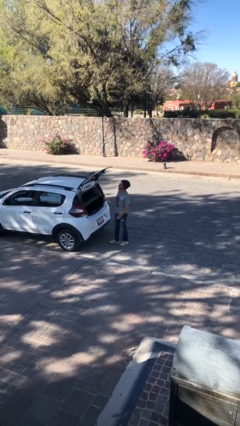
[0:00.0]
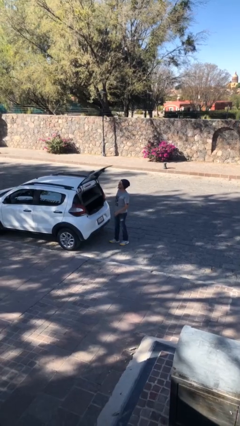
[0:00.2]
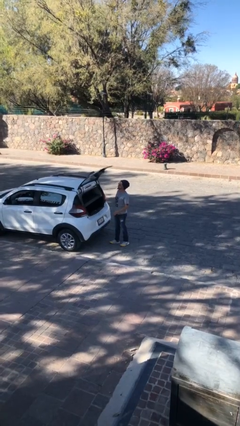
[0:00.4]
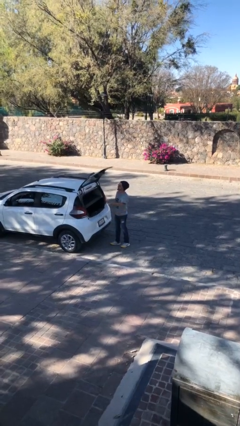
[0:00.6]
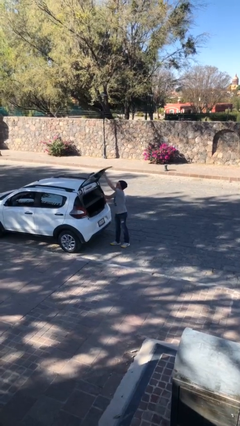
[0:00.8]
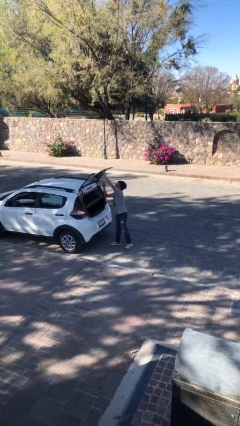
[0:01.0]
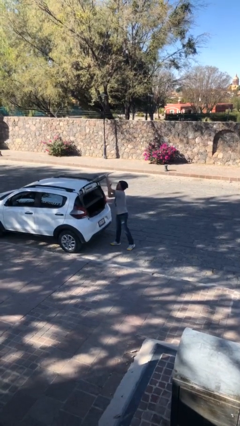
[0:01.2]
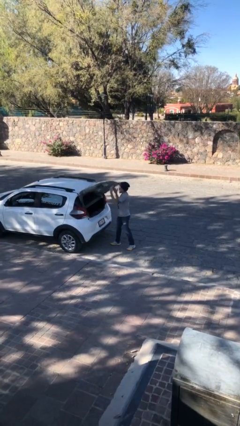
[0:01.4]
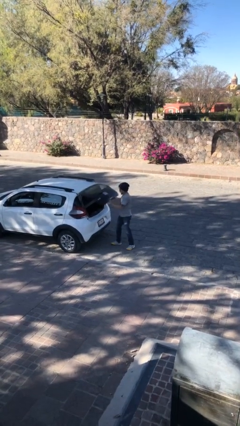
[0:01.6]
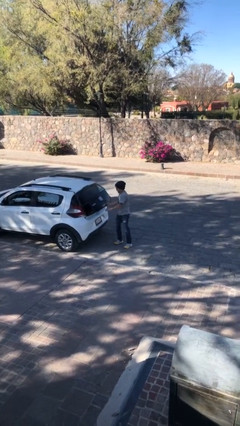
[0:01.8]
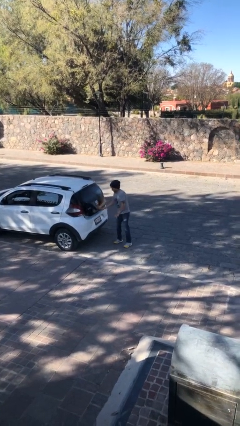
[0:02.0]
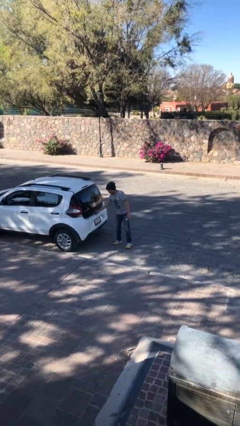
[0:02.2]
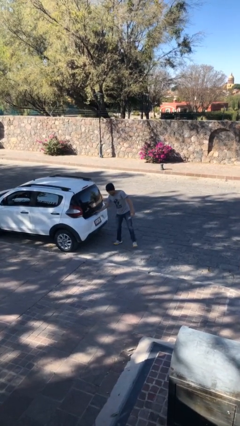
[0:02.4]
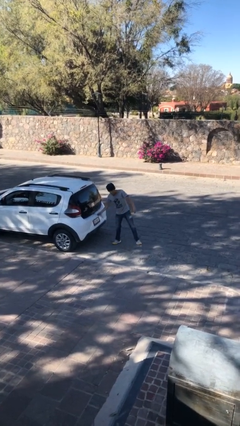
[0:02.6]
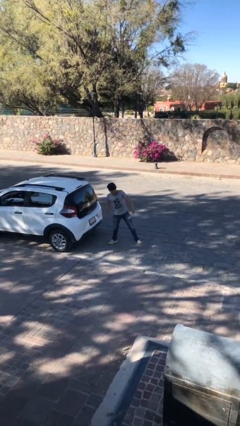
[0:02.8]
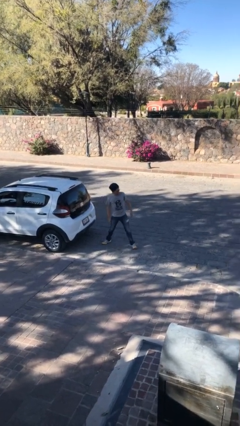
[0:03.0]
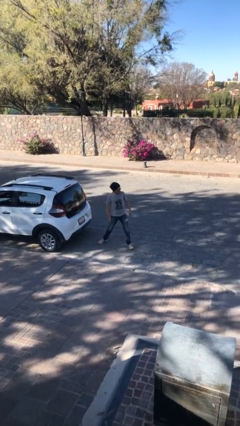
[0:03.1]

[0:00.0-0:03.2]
person closes car trunk

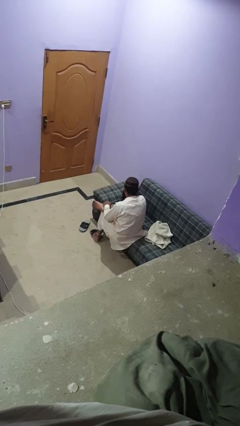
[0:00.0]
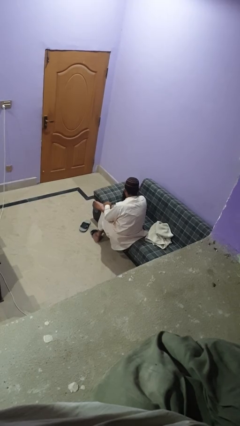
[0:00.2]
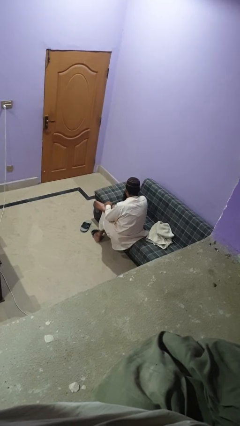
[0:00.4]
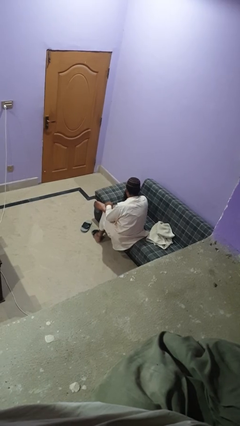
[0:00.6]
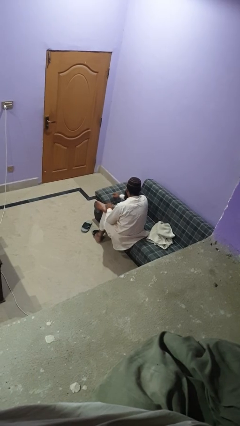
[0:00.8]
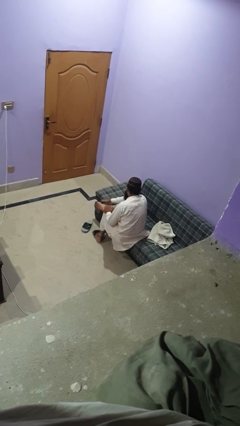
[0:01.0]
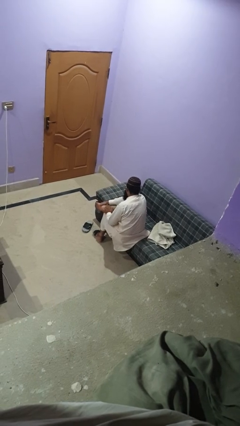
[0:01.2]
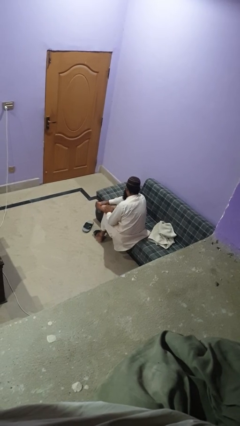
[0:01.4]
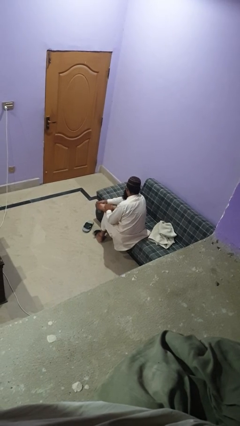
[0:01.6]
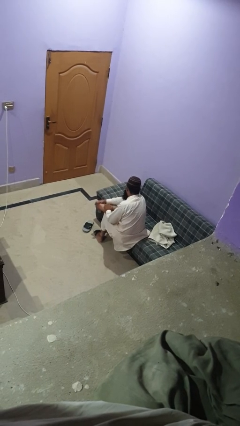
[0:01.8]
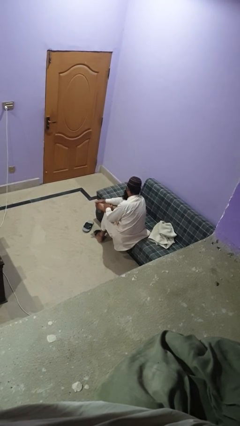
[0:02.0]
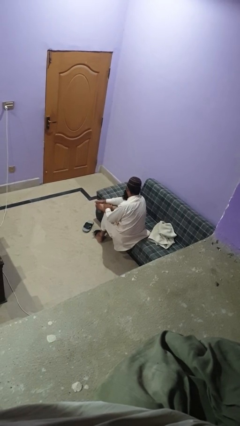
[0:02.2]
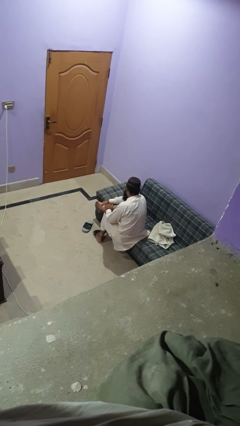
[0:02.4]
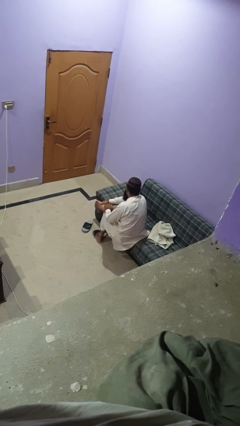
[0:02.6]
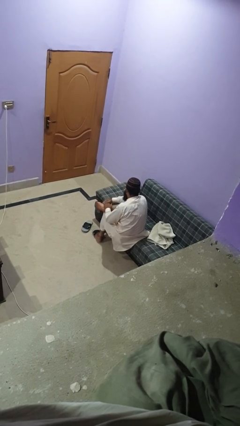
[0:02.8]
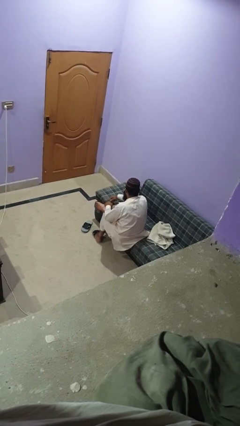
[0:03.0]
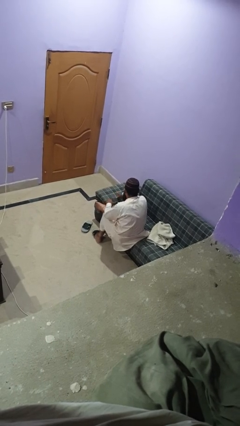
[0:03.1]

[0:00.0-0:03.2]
person rubs foot

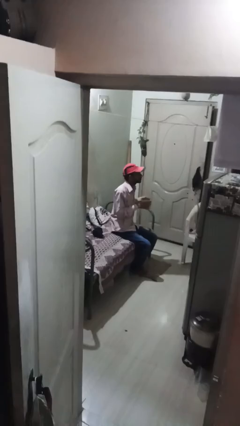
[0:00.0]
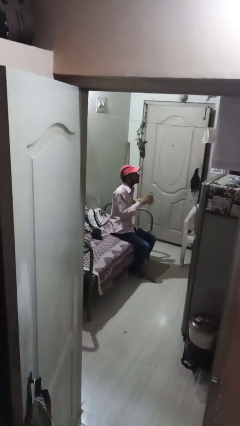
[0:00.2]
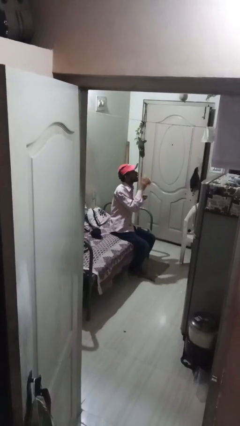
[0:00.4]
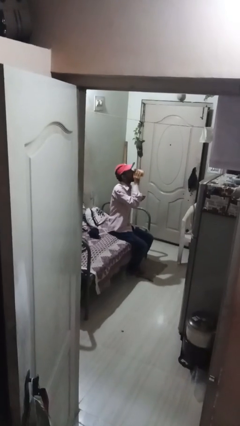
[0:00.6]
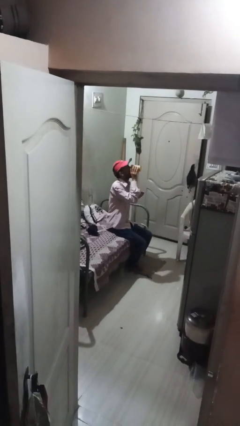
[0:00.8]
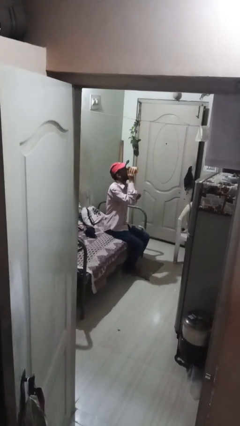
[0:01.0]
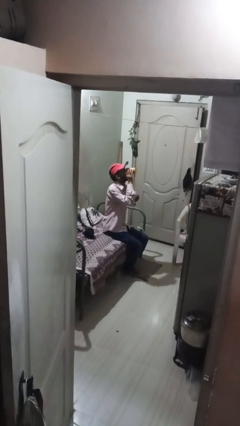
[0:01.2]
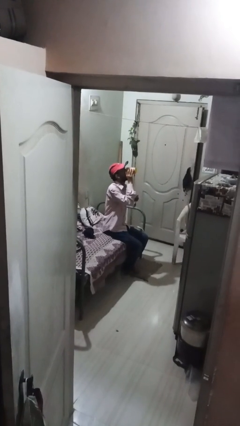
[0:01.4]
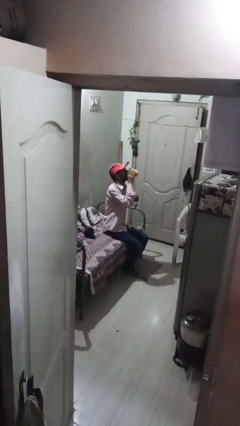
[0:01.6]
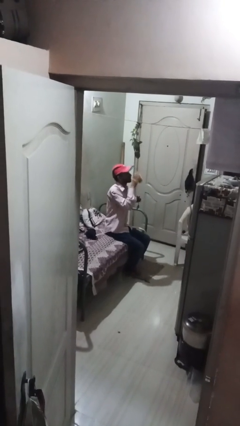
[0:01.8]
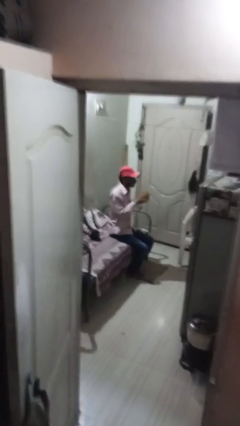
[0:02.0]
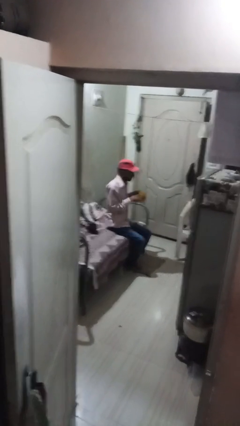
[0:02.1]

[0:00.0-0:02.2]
person drinks from mug

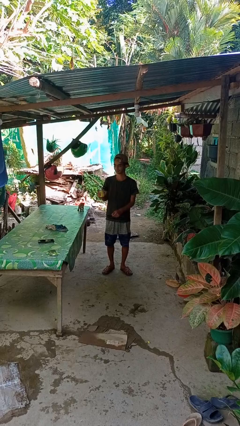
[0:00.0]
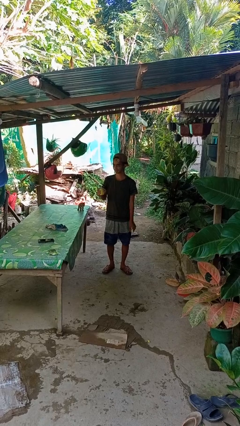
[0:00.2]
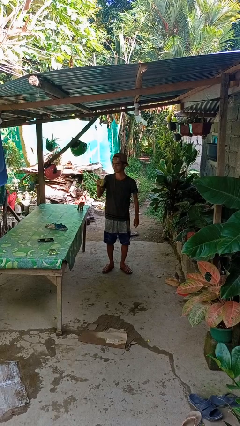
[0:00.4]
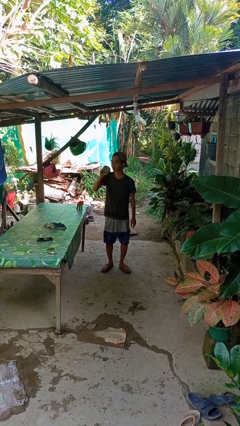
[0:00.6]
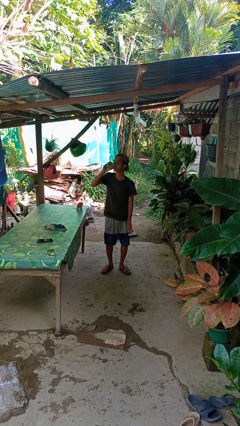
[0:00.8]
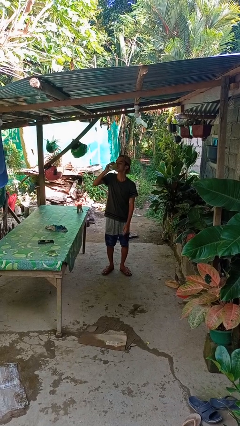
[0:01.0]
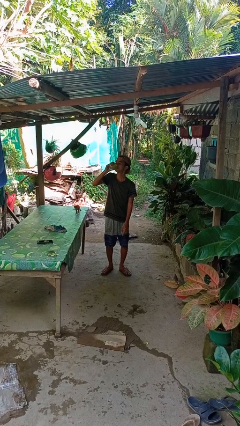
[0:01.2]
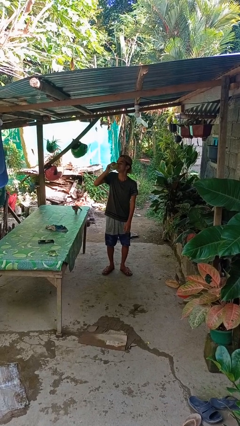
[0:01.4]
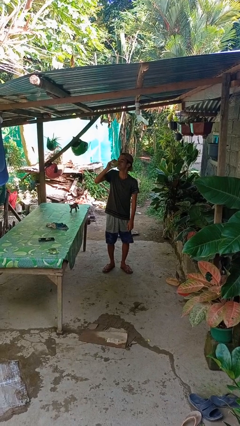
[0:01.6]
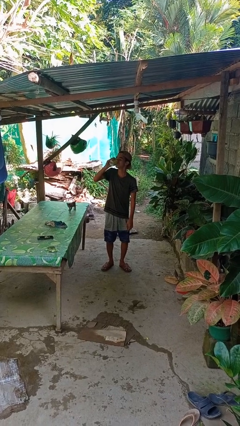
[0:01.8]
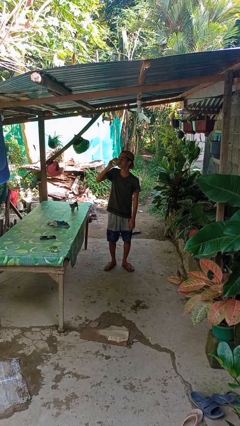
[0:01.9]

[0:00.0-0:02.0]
person drinks from beverage can

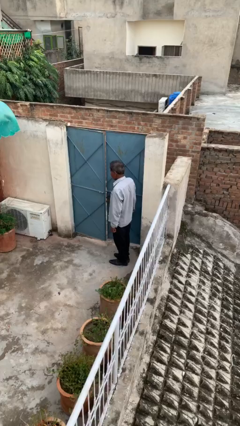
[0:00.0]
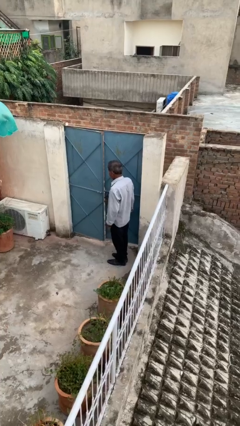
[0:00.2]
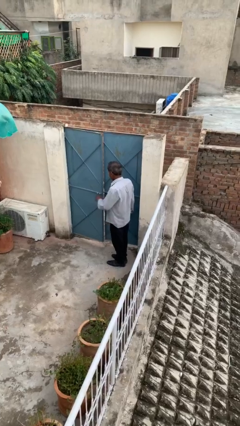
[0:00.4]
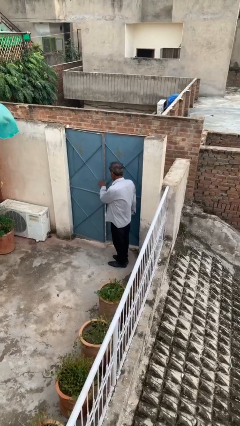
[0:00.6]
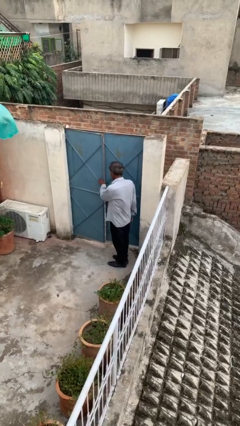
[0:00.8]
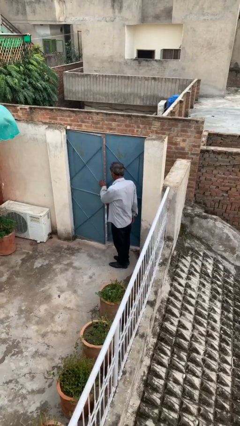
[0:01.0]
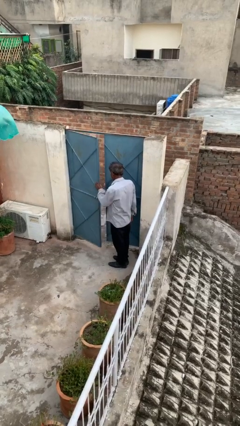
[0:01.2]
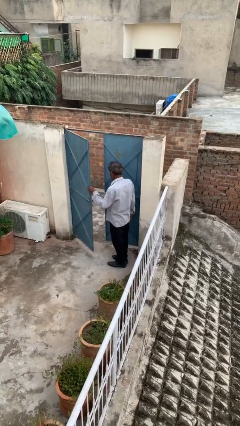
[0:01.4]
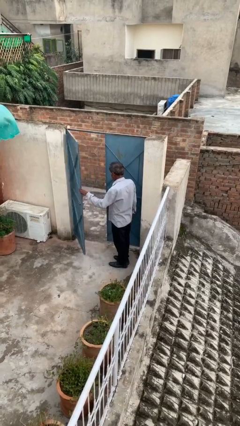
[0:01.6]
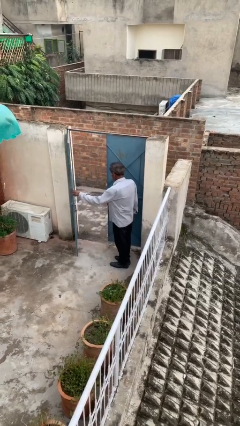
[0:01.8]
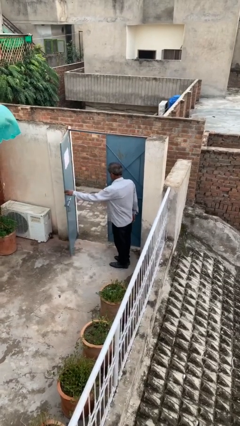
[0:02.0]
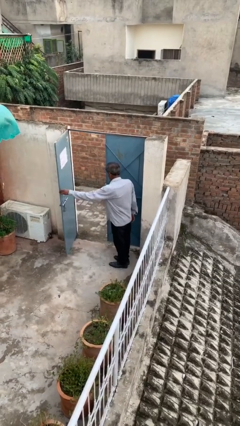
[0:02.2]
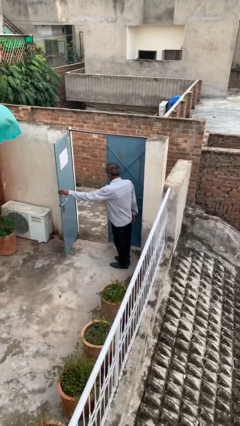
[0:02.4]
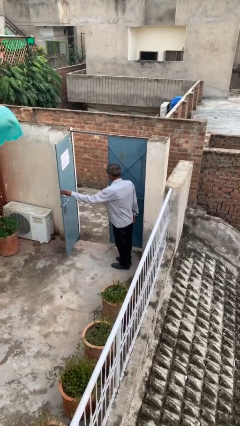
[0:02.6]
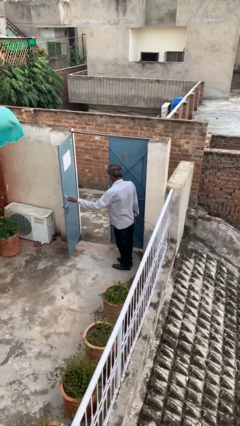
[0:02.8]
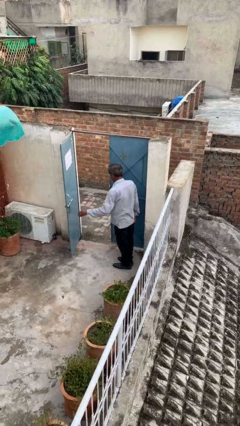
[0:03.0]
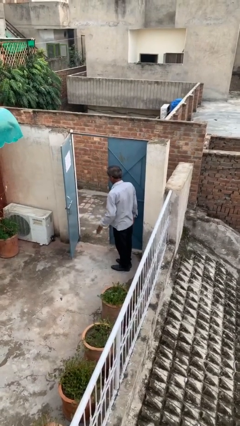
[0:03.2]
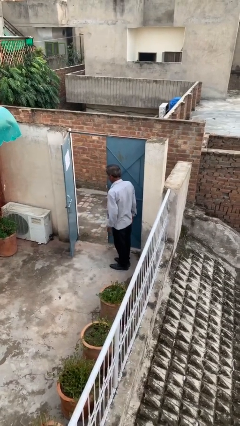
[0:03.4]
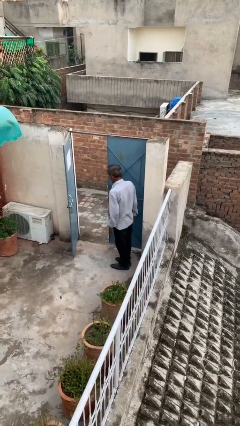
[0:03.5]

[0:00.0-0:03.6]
person opens facility door

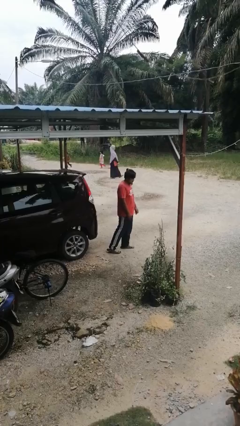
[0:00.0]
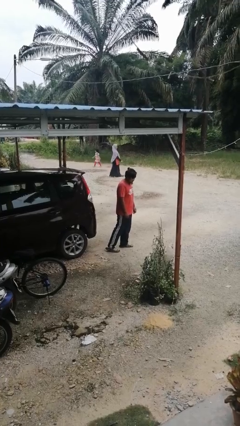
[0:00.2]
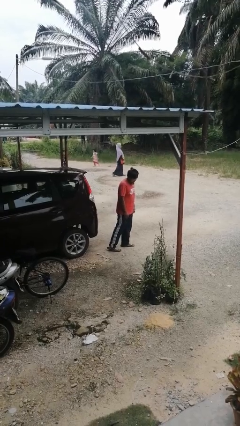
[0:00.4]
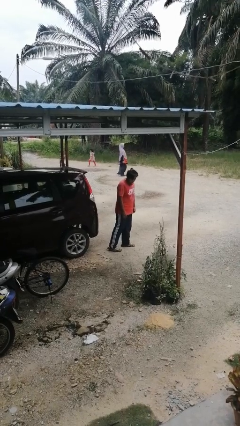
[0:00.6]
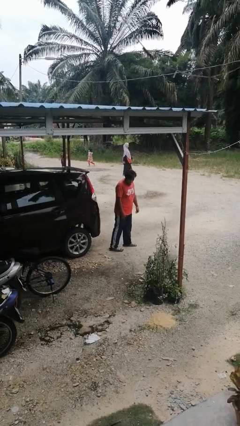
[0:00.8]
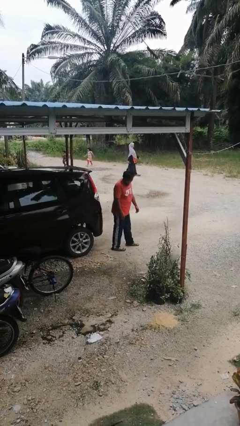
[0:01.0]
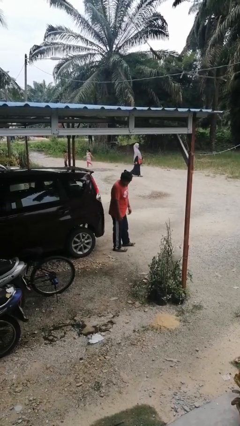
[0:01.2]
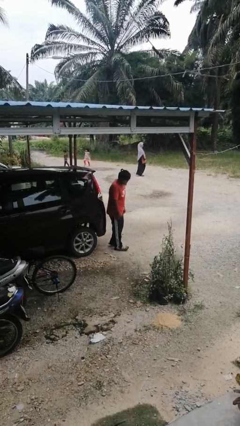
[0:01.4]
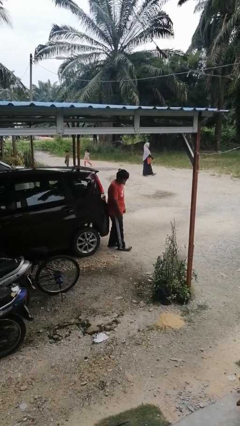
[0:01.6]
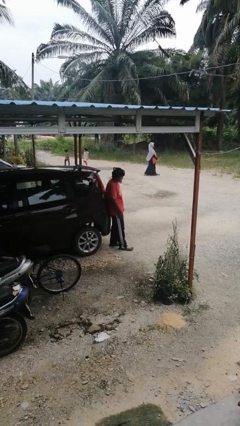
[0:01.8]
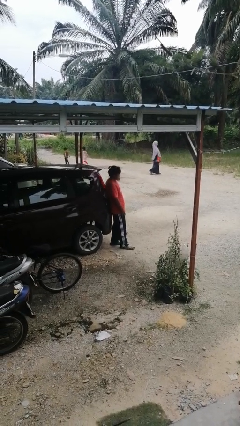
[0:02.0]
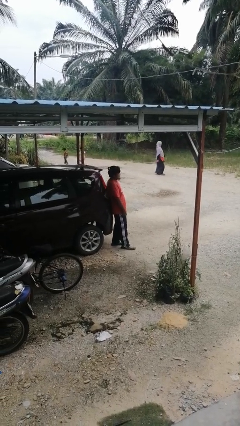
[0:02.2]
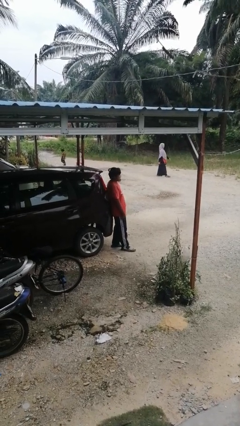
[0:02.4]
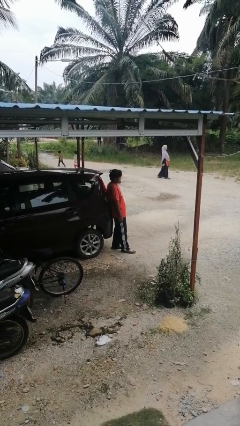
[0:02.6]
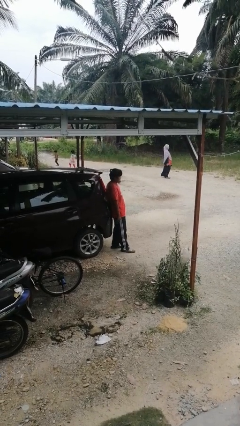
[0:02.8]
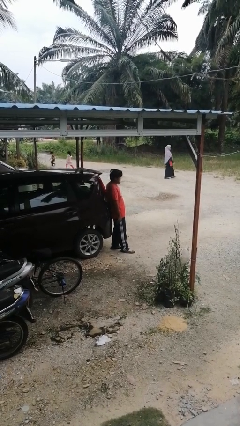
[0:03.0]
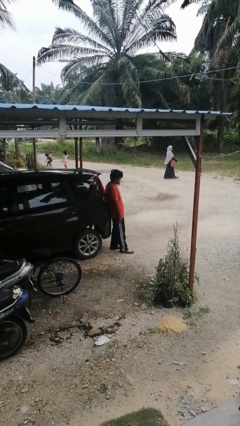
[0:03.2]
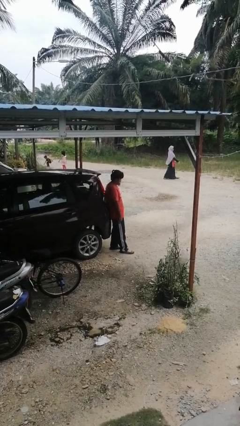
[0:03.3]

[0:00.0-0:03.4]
person leans against car
